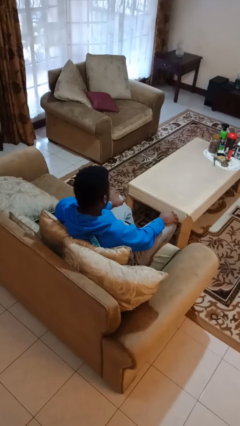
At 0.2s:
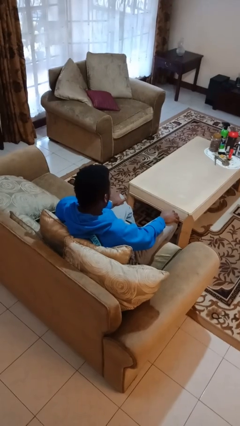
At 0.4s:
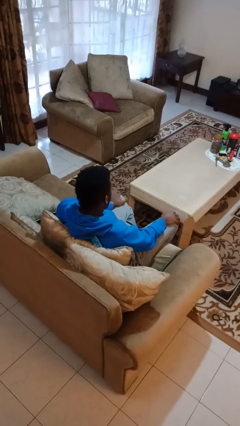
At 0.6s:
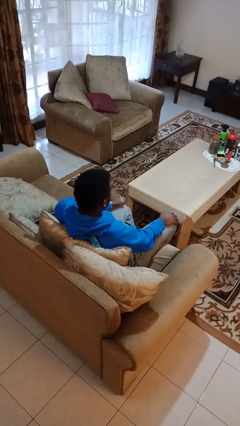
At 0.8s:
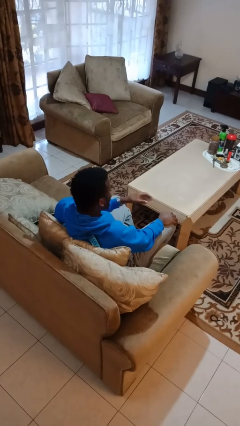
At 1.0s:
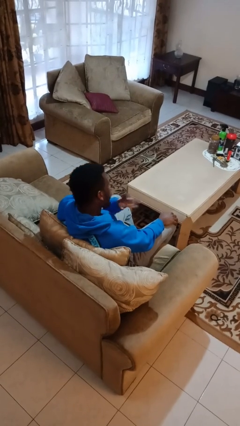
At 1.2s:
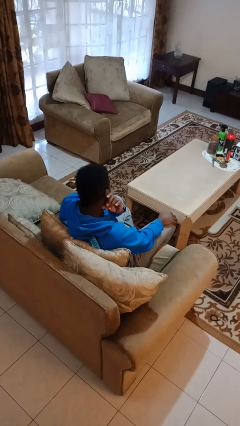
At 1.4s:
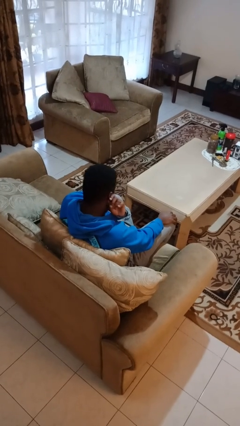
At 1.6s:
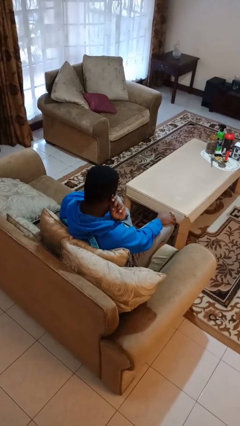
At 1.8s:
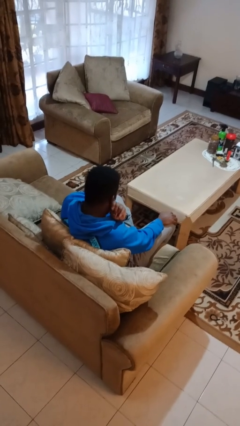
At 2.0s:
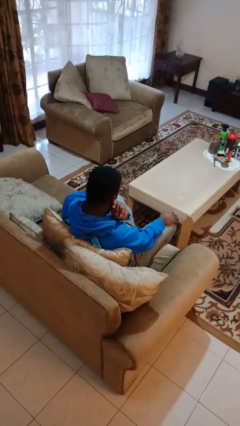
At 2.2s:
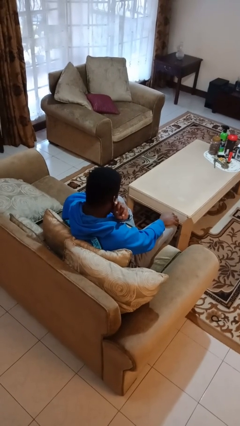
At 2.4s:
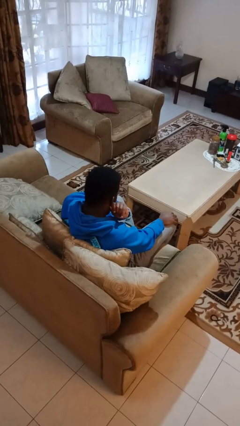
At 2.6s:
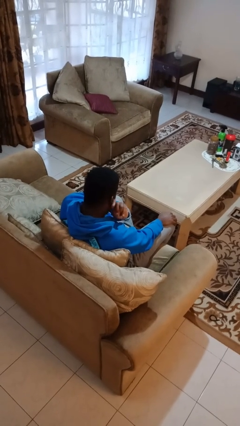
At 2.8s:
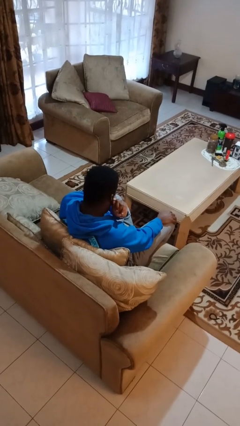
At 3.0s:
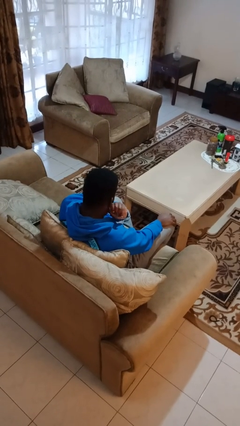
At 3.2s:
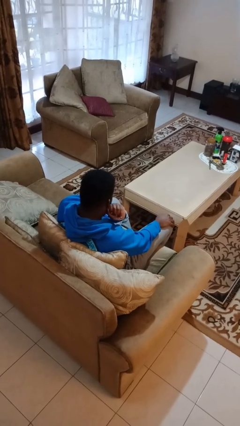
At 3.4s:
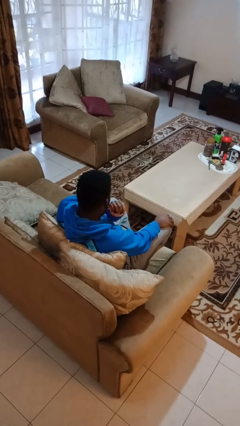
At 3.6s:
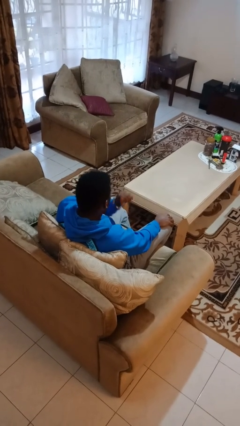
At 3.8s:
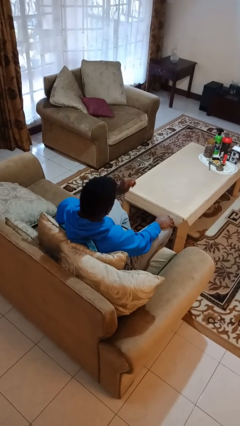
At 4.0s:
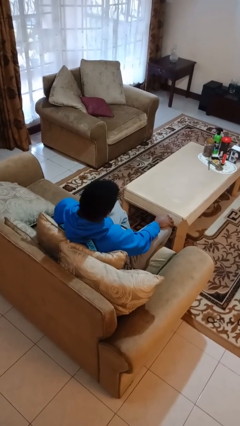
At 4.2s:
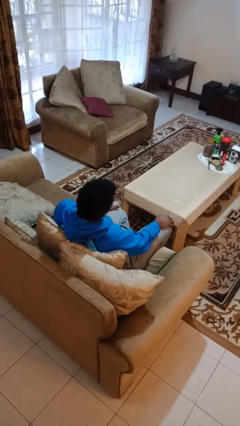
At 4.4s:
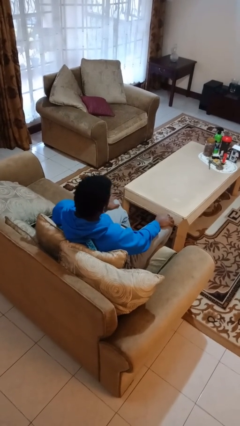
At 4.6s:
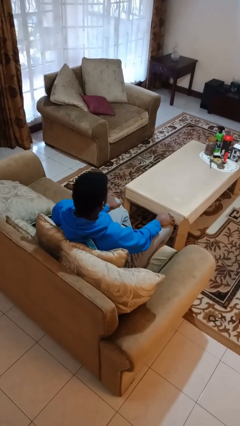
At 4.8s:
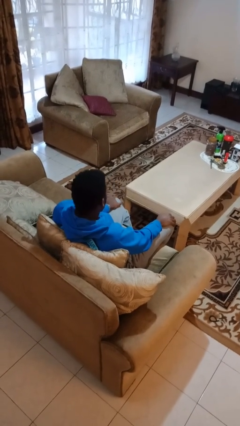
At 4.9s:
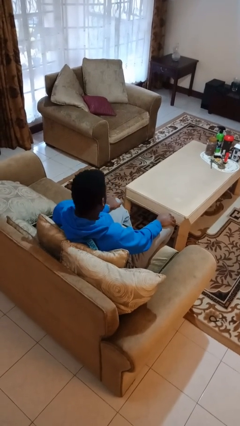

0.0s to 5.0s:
person touches earlobe

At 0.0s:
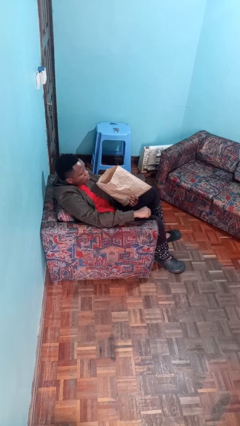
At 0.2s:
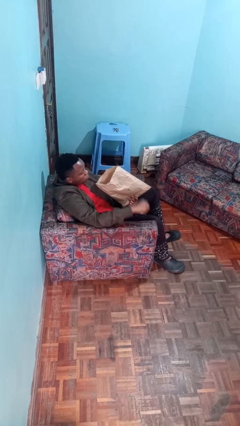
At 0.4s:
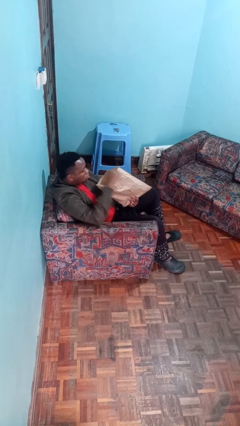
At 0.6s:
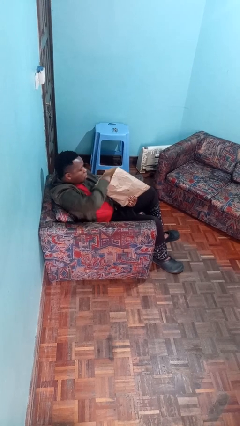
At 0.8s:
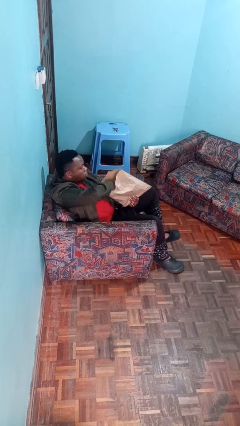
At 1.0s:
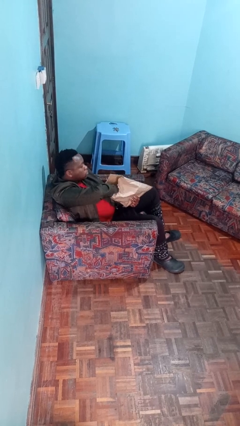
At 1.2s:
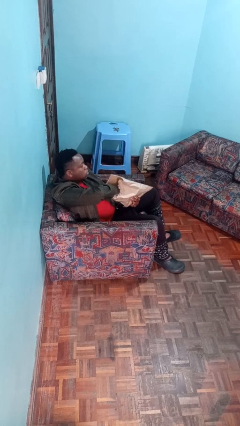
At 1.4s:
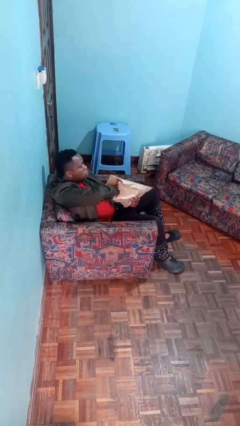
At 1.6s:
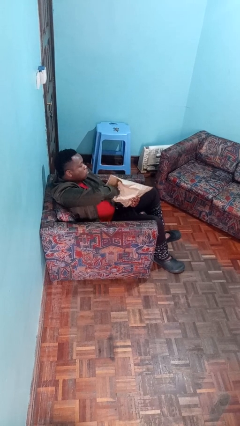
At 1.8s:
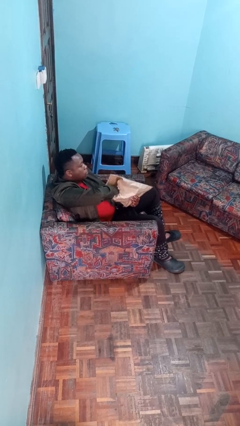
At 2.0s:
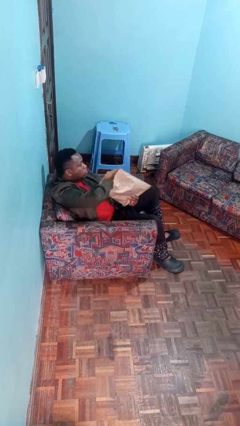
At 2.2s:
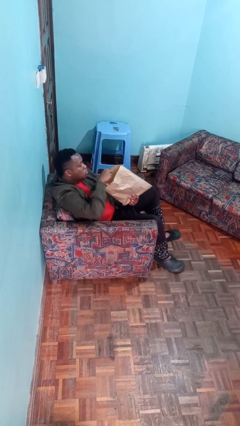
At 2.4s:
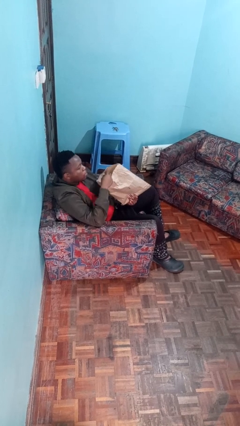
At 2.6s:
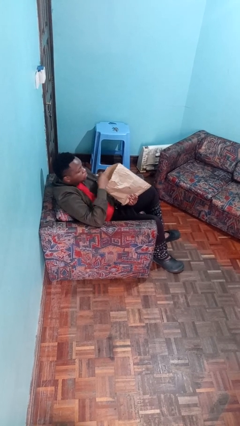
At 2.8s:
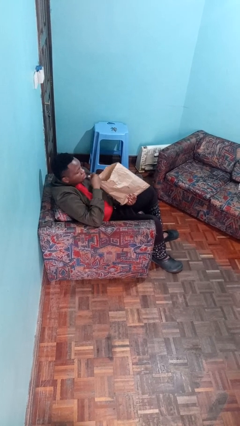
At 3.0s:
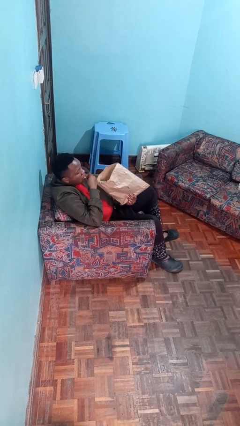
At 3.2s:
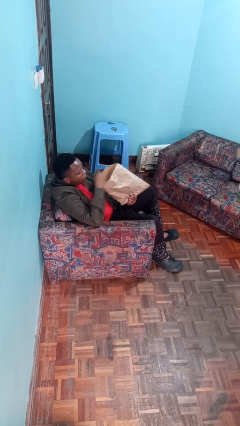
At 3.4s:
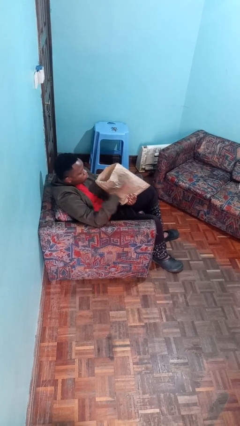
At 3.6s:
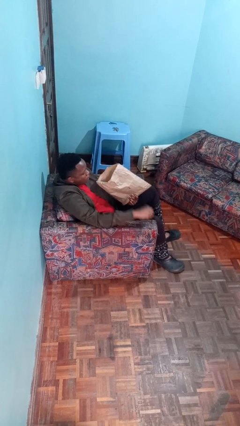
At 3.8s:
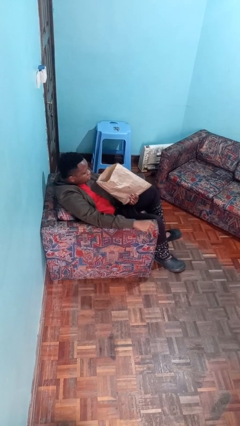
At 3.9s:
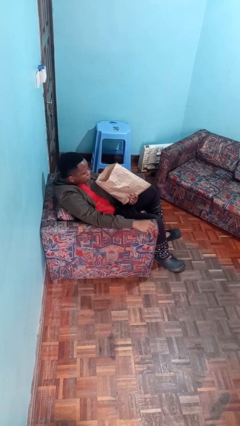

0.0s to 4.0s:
person eats snack from bag

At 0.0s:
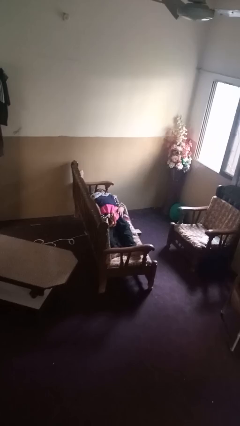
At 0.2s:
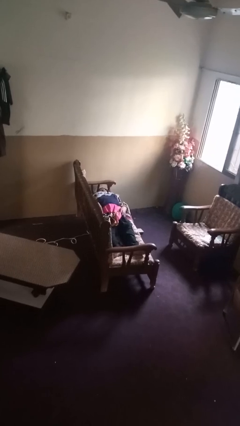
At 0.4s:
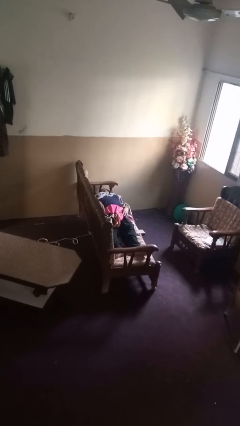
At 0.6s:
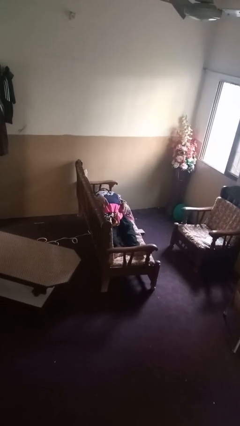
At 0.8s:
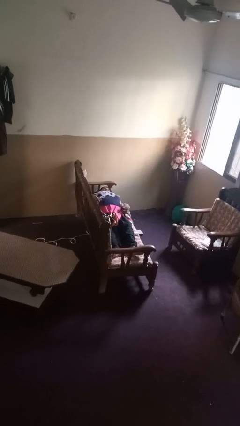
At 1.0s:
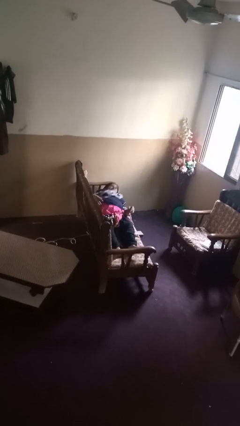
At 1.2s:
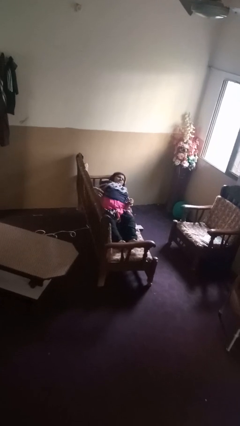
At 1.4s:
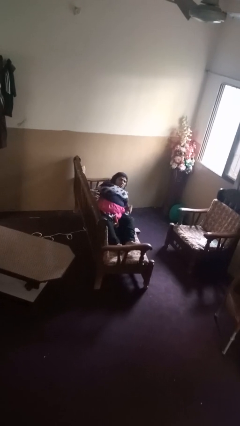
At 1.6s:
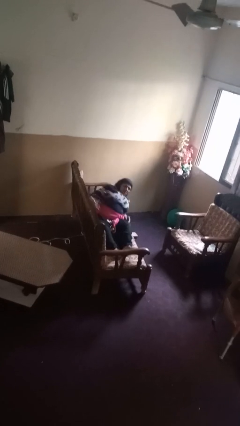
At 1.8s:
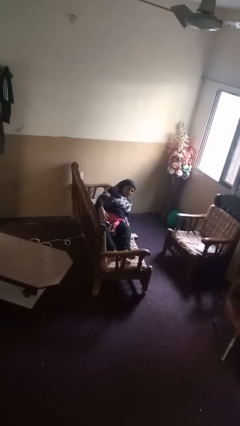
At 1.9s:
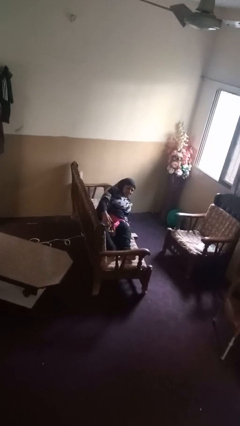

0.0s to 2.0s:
person stands up

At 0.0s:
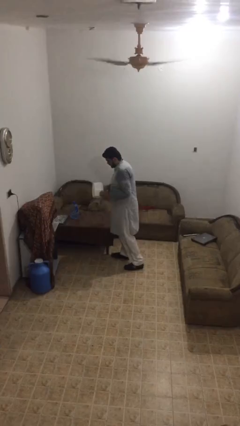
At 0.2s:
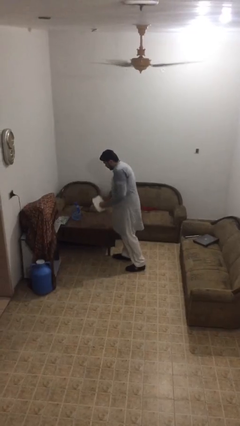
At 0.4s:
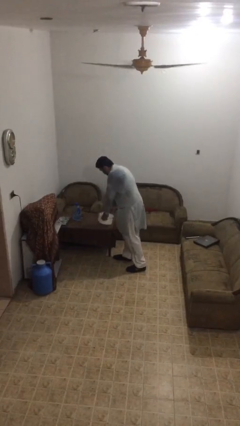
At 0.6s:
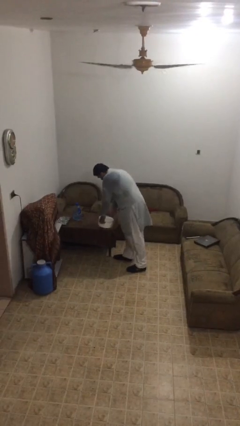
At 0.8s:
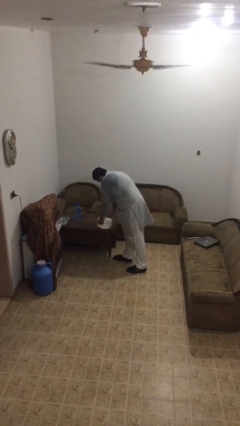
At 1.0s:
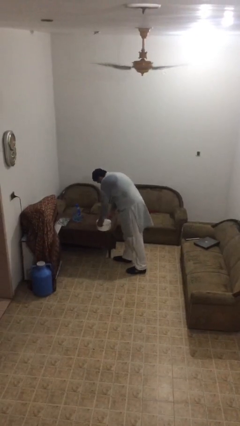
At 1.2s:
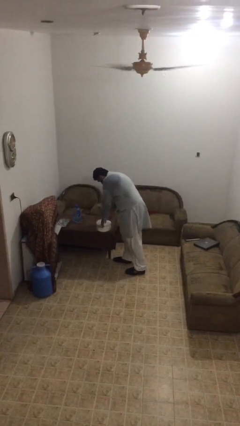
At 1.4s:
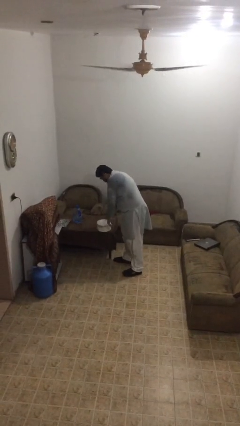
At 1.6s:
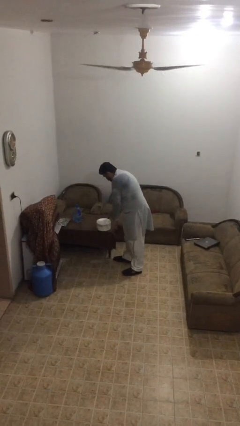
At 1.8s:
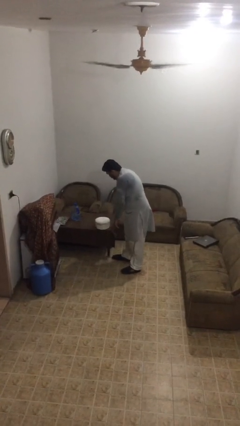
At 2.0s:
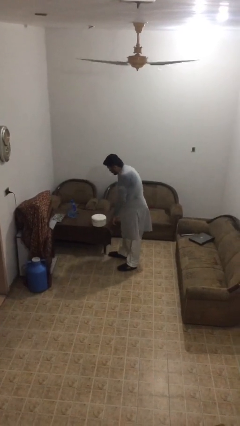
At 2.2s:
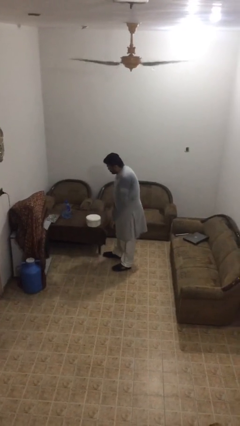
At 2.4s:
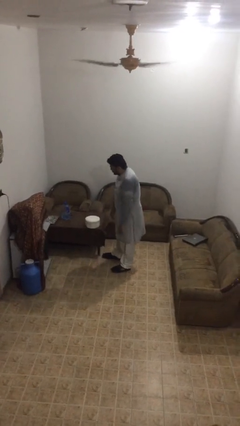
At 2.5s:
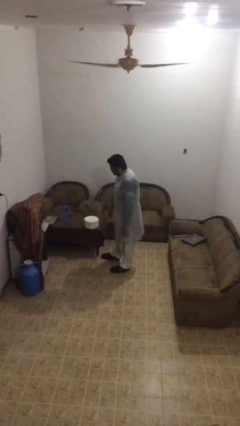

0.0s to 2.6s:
person puts down object on table

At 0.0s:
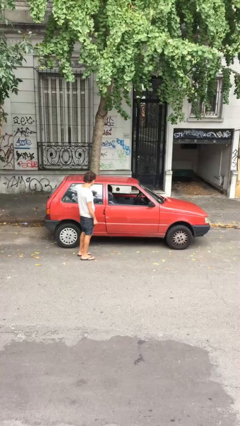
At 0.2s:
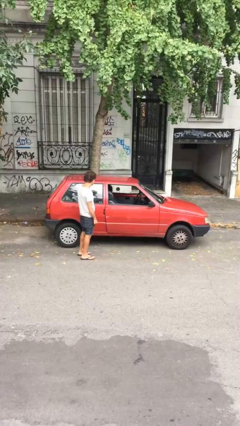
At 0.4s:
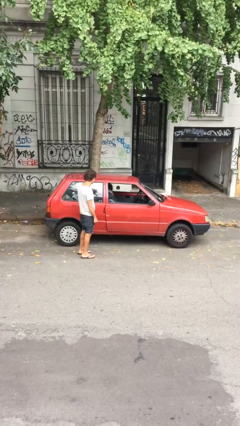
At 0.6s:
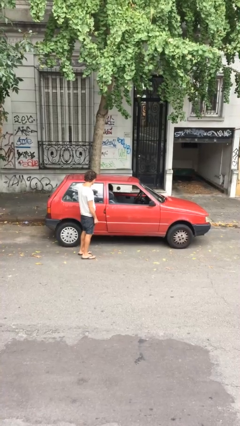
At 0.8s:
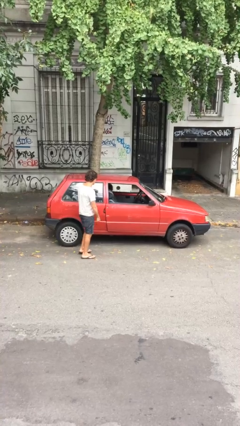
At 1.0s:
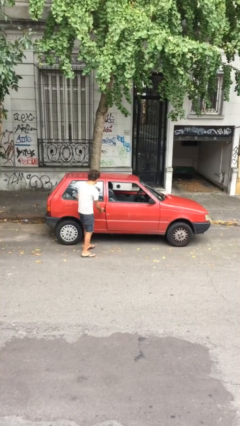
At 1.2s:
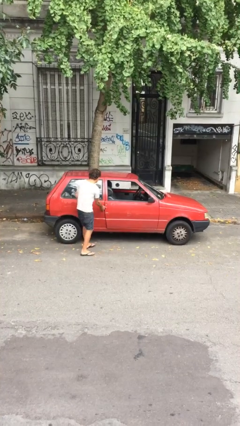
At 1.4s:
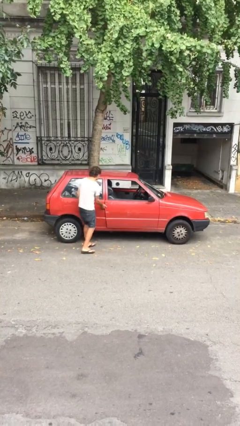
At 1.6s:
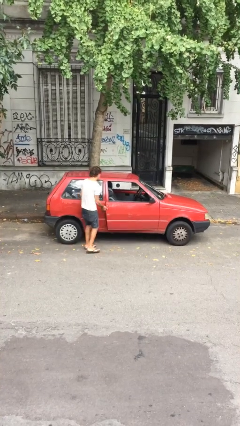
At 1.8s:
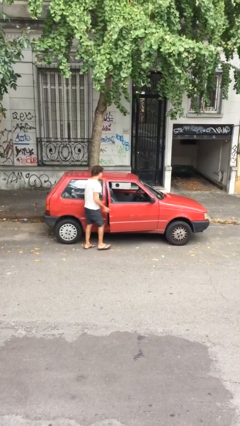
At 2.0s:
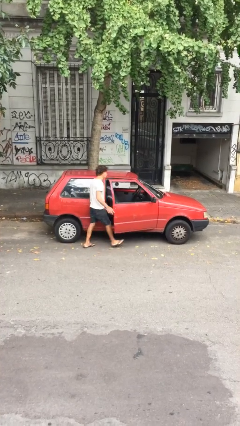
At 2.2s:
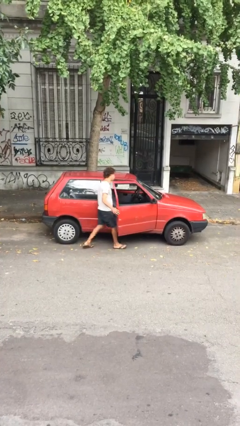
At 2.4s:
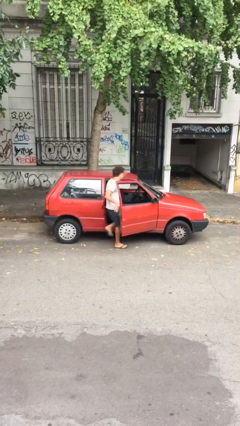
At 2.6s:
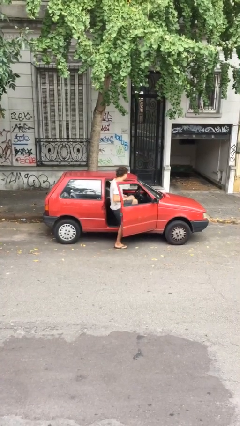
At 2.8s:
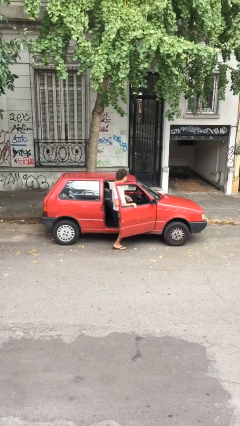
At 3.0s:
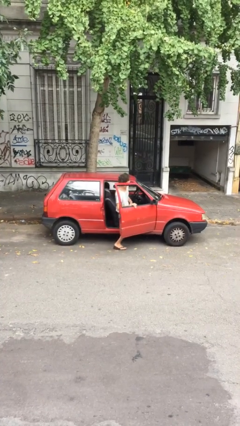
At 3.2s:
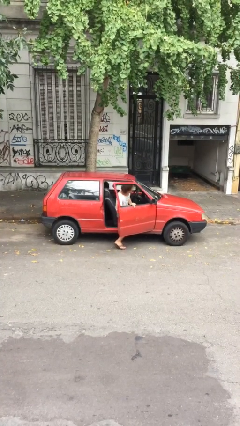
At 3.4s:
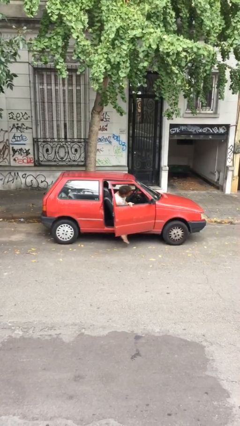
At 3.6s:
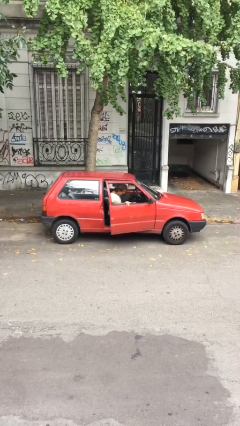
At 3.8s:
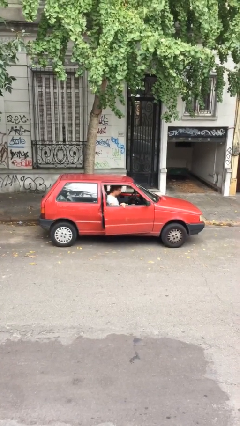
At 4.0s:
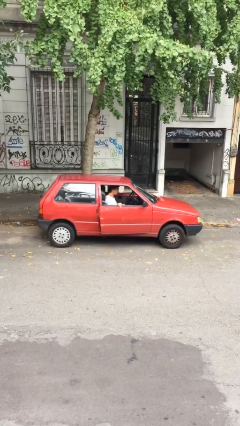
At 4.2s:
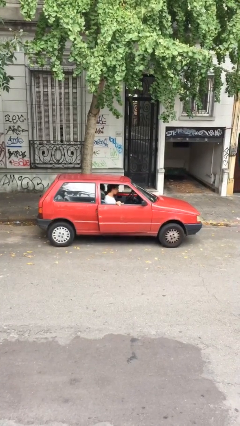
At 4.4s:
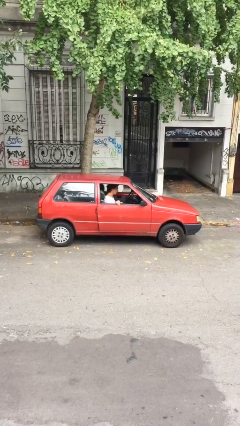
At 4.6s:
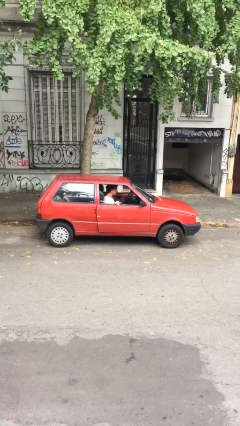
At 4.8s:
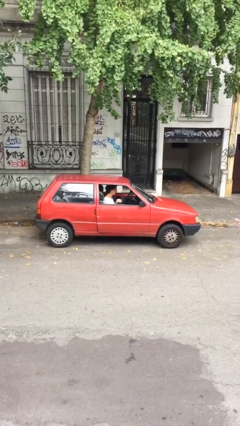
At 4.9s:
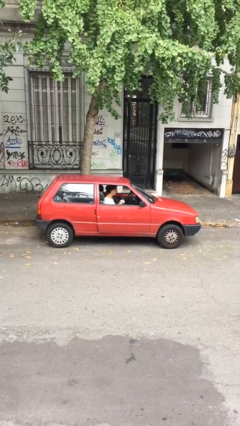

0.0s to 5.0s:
car picks up person
